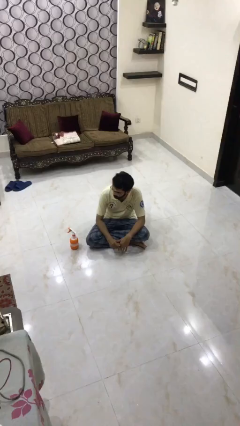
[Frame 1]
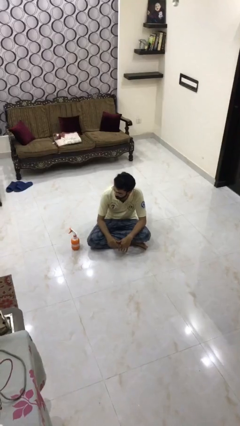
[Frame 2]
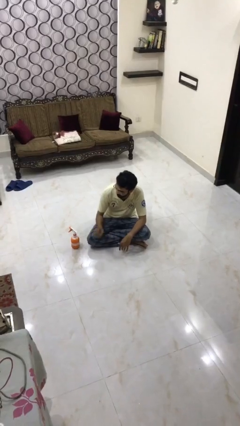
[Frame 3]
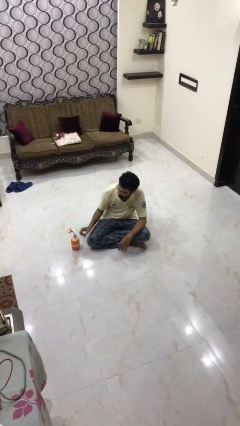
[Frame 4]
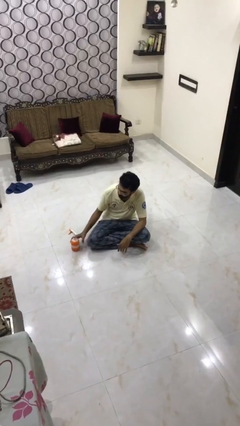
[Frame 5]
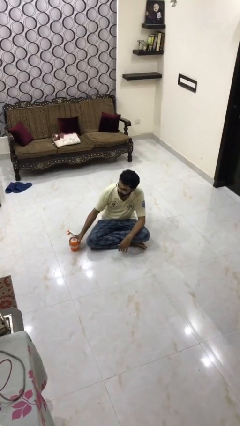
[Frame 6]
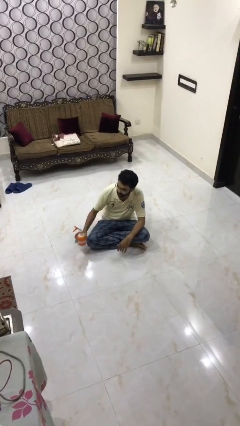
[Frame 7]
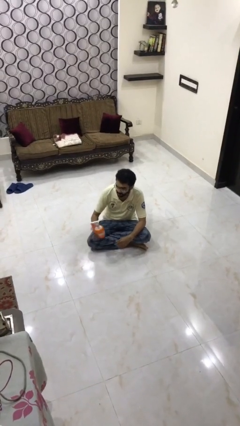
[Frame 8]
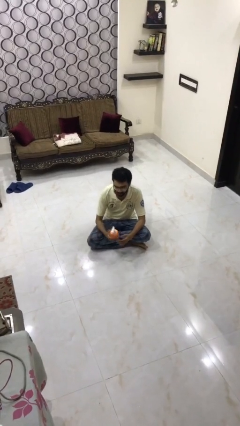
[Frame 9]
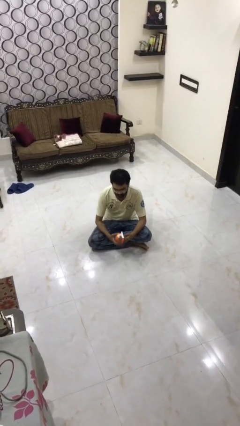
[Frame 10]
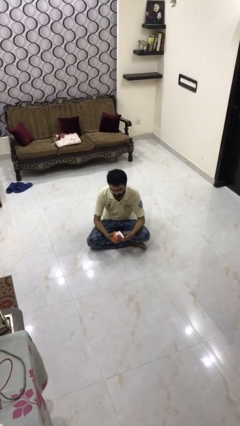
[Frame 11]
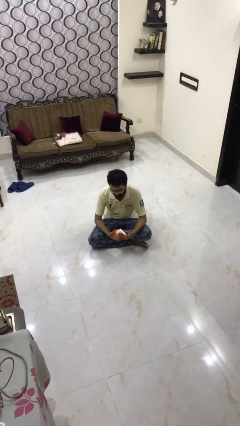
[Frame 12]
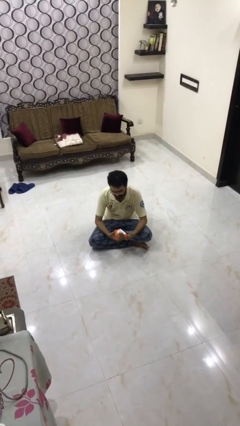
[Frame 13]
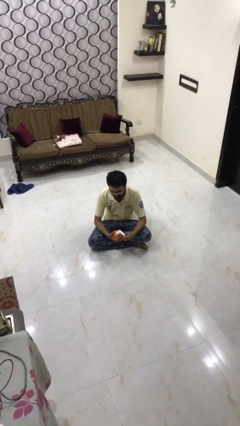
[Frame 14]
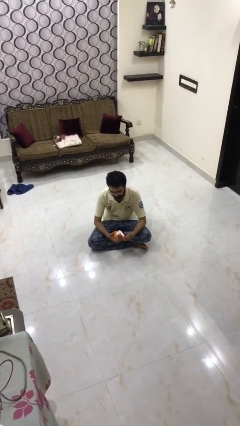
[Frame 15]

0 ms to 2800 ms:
person picks up object from floor

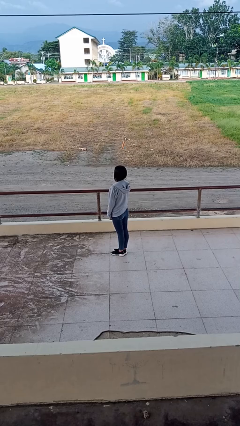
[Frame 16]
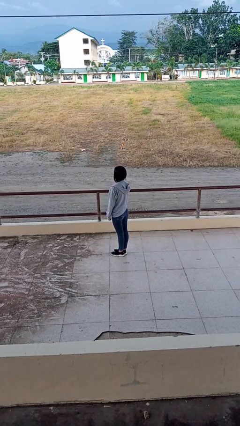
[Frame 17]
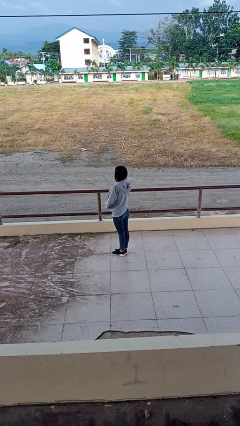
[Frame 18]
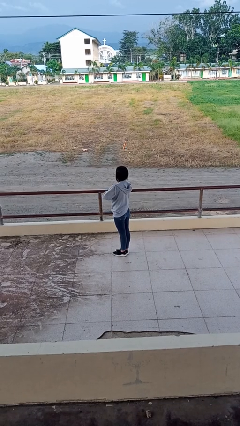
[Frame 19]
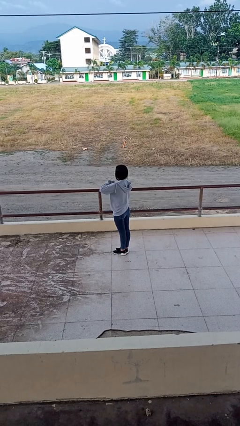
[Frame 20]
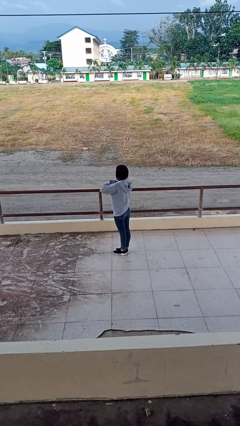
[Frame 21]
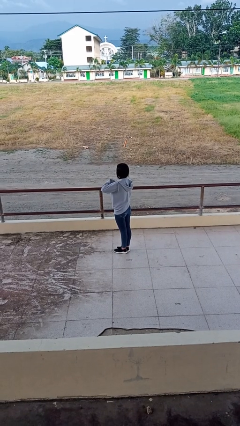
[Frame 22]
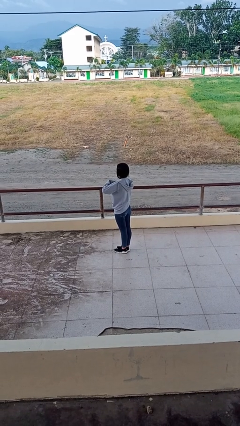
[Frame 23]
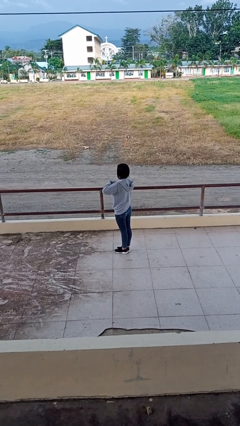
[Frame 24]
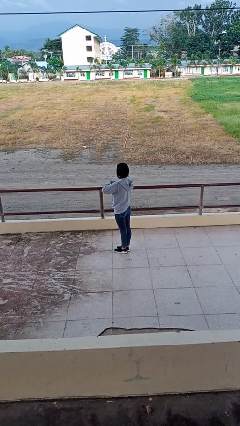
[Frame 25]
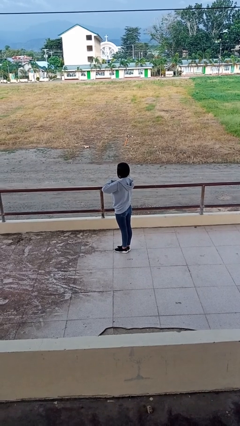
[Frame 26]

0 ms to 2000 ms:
person zips up jacket

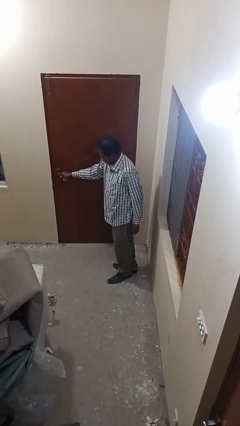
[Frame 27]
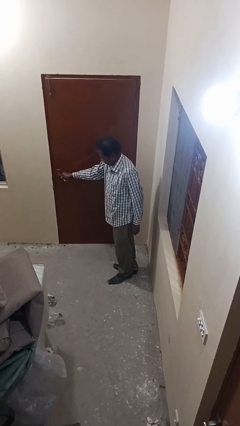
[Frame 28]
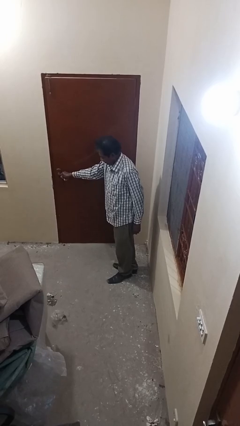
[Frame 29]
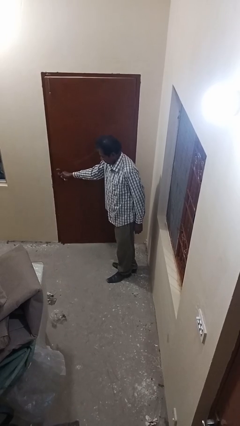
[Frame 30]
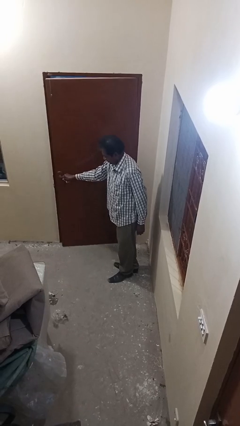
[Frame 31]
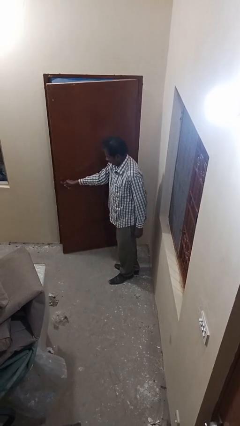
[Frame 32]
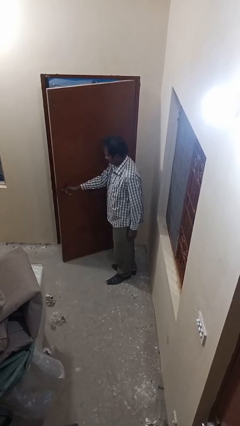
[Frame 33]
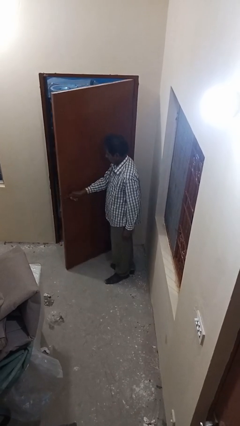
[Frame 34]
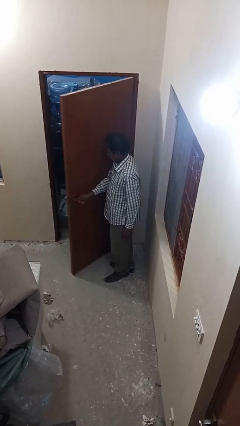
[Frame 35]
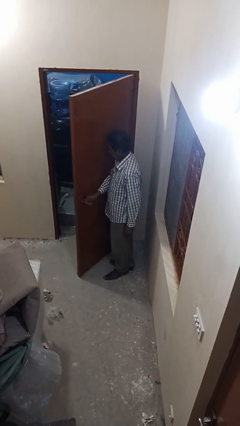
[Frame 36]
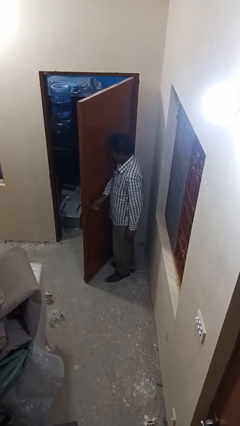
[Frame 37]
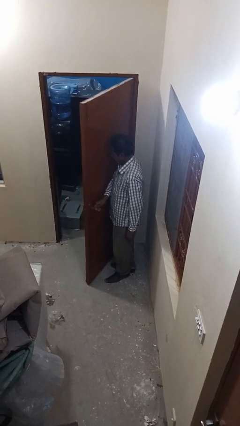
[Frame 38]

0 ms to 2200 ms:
person opens facility door

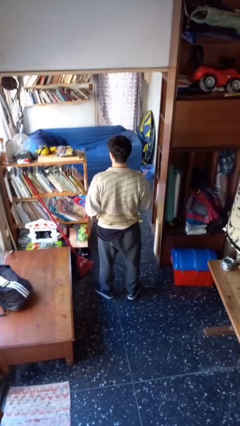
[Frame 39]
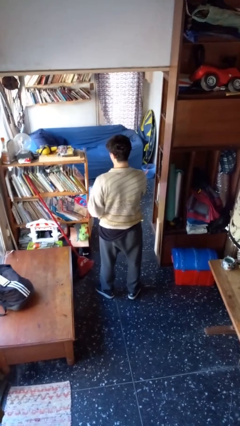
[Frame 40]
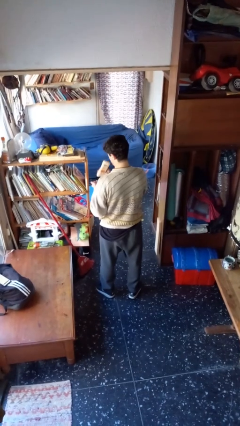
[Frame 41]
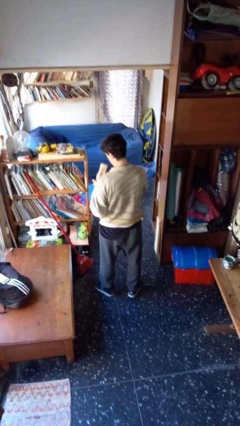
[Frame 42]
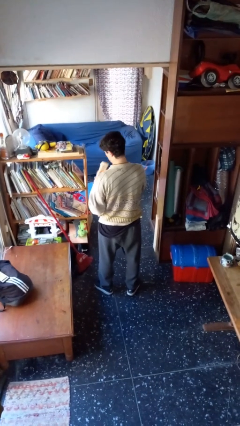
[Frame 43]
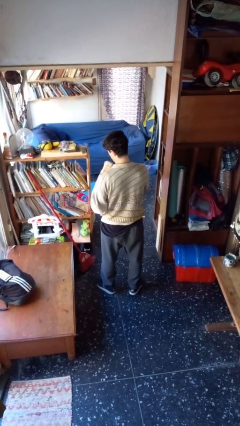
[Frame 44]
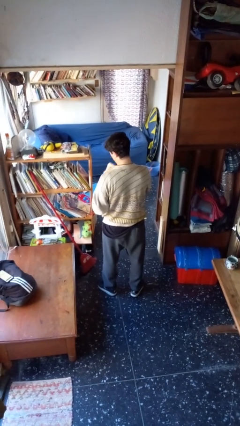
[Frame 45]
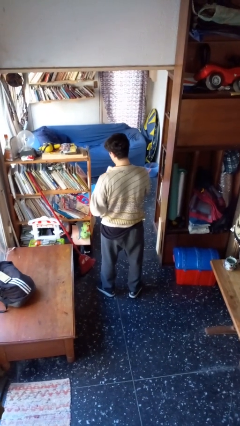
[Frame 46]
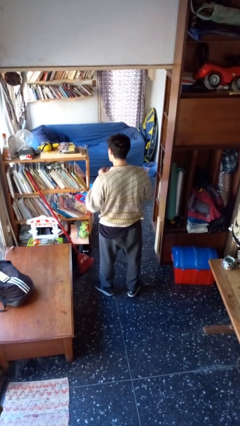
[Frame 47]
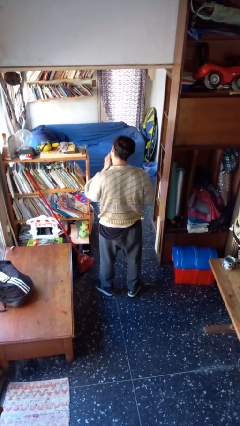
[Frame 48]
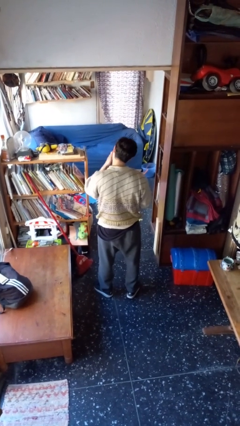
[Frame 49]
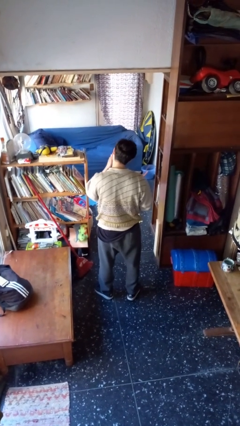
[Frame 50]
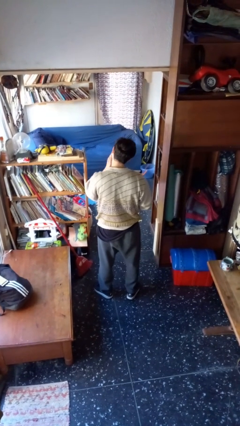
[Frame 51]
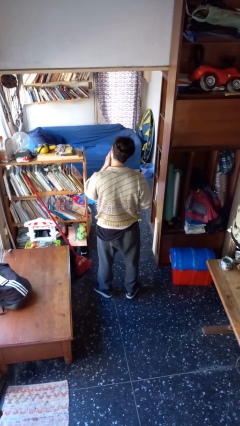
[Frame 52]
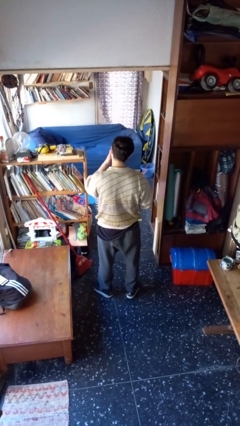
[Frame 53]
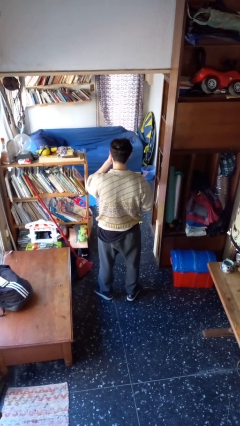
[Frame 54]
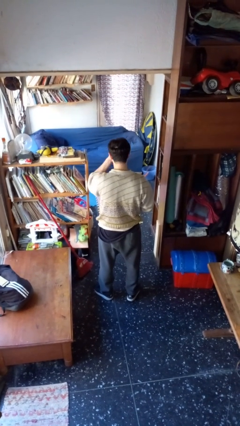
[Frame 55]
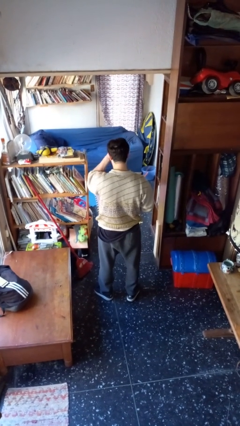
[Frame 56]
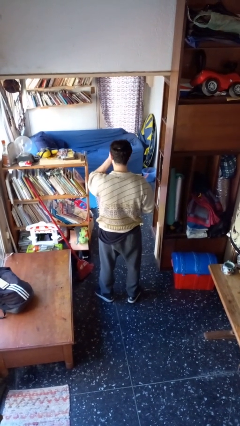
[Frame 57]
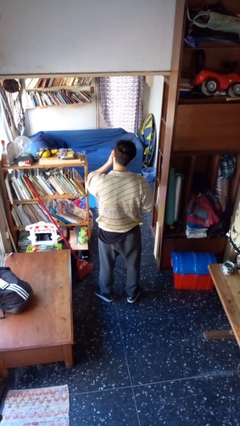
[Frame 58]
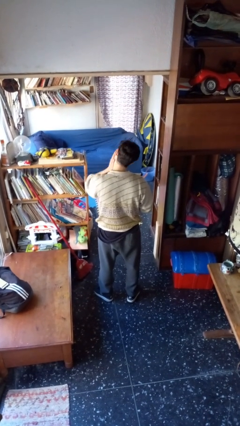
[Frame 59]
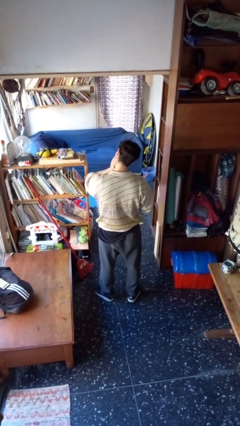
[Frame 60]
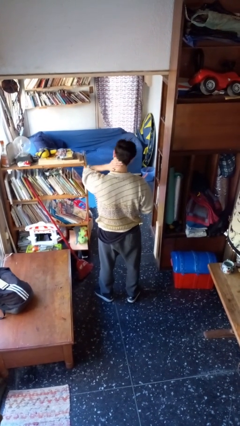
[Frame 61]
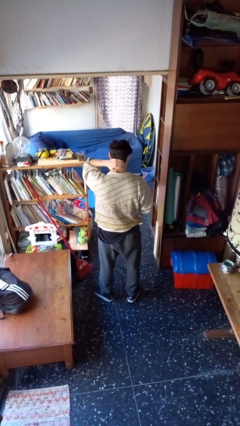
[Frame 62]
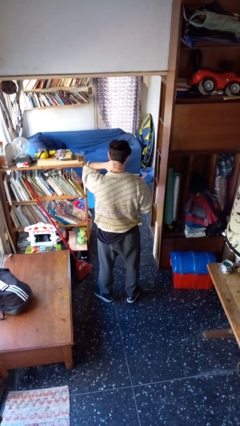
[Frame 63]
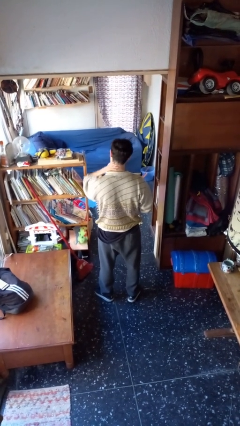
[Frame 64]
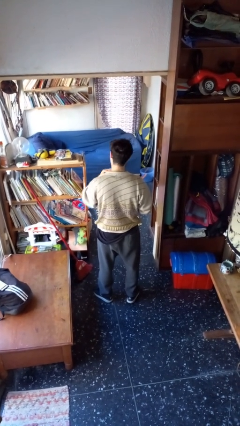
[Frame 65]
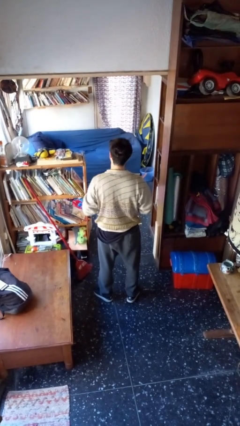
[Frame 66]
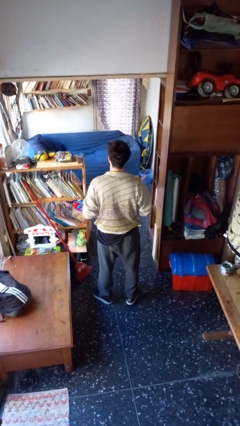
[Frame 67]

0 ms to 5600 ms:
person applies sunscreen

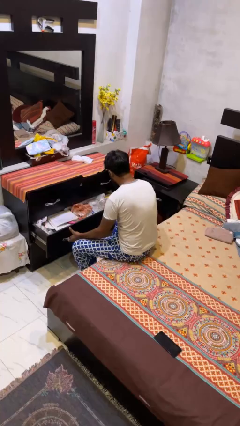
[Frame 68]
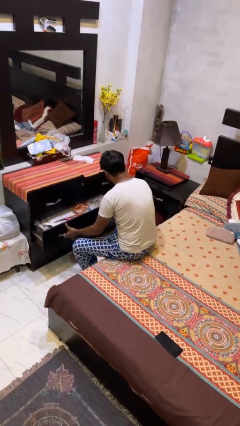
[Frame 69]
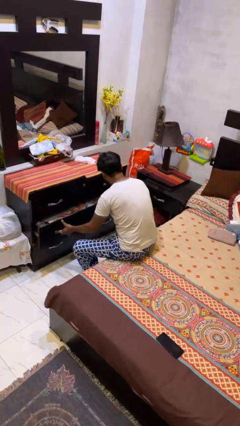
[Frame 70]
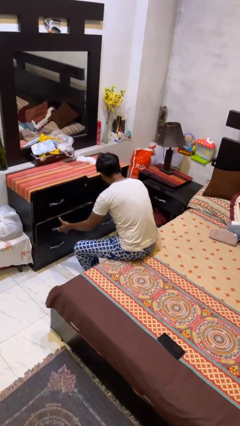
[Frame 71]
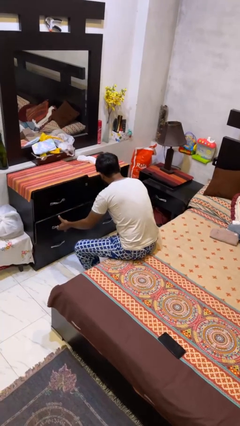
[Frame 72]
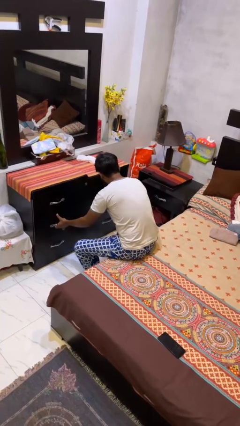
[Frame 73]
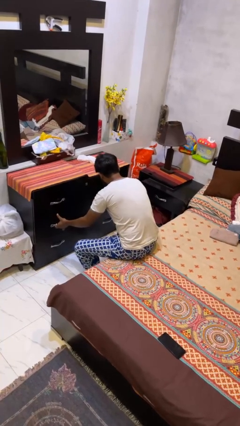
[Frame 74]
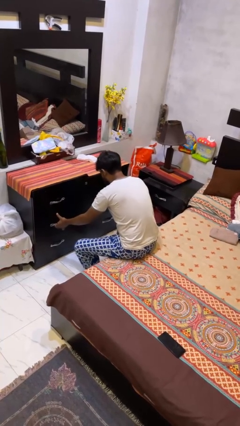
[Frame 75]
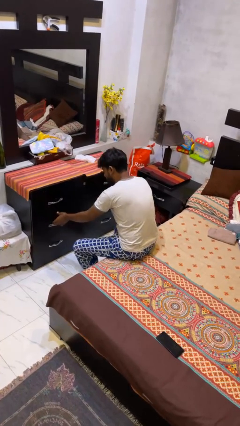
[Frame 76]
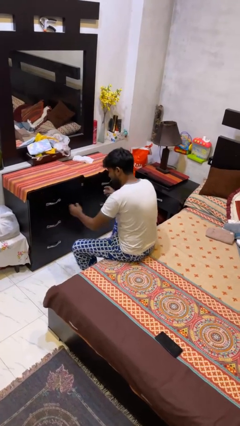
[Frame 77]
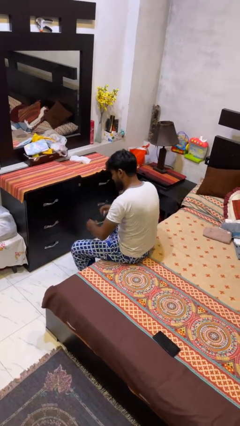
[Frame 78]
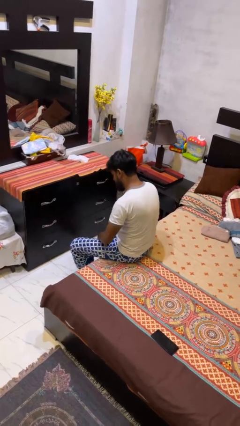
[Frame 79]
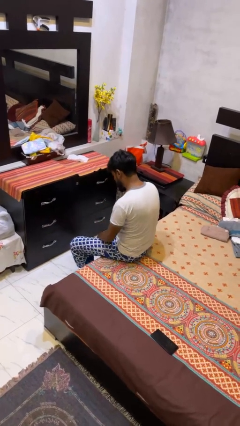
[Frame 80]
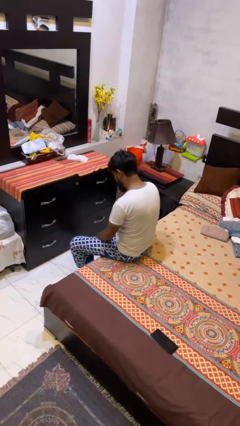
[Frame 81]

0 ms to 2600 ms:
person closes dresser drawer

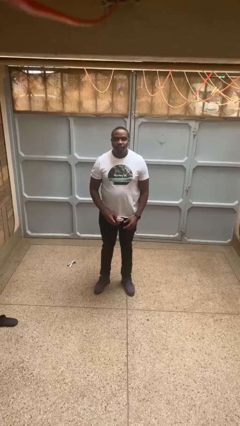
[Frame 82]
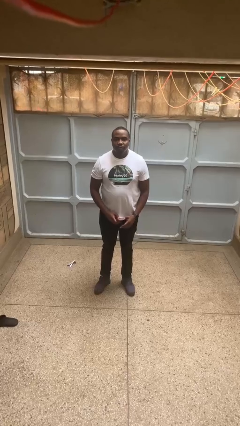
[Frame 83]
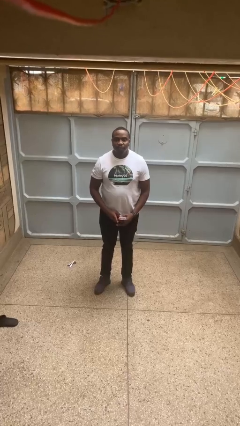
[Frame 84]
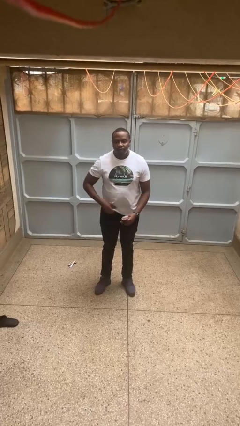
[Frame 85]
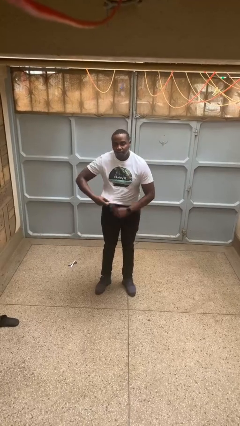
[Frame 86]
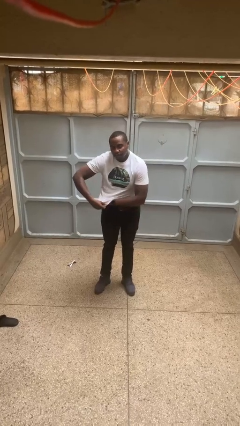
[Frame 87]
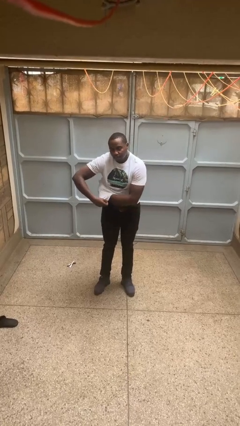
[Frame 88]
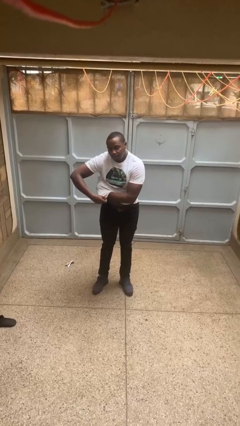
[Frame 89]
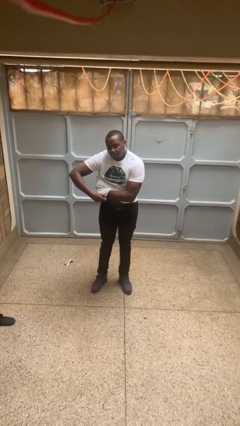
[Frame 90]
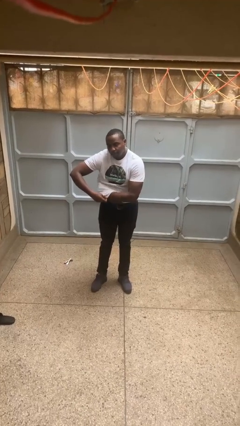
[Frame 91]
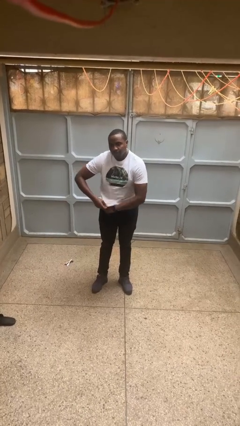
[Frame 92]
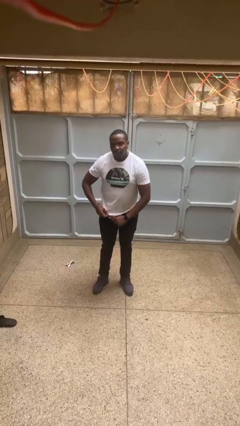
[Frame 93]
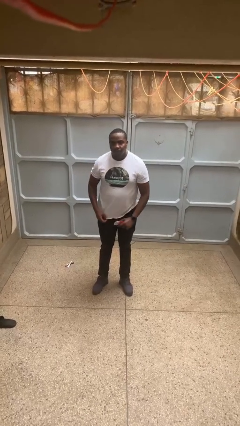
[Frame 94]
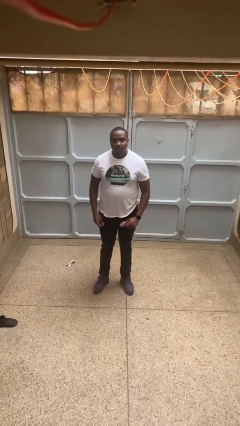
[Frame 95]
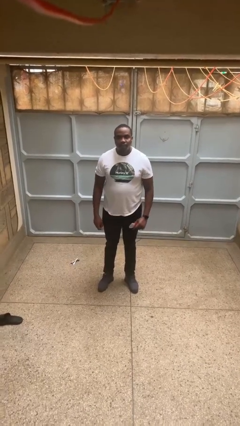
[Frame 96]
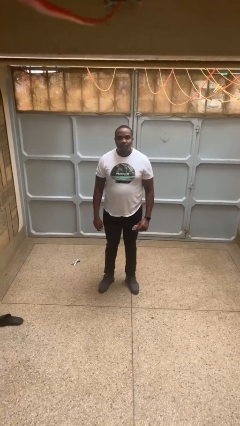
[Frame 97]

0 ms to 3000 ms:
person applies deodorant
